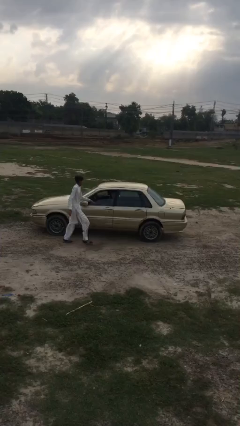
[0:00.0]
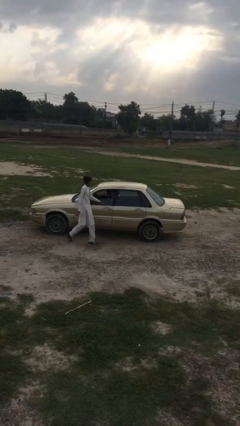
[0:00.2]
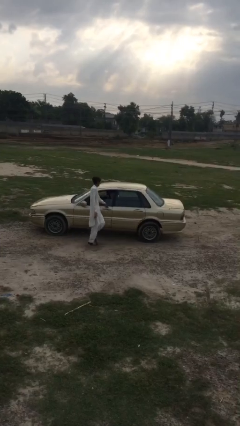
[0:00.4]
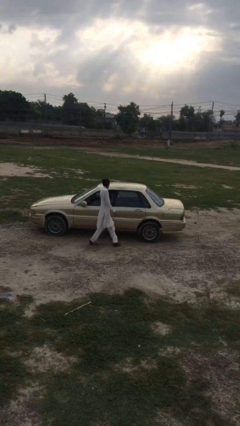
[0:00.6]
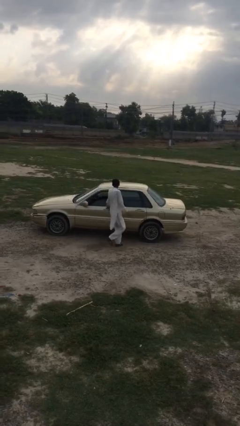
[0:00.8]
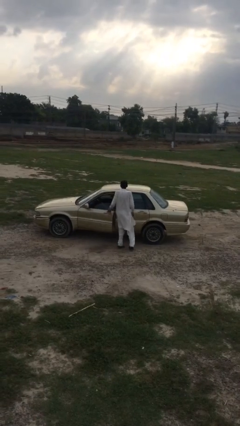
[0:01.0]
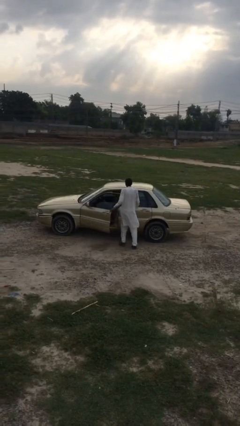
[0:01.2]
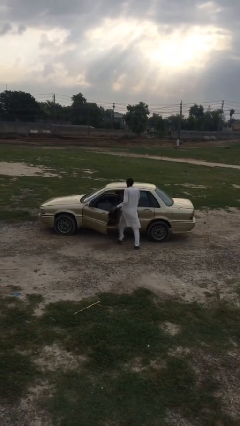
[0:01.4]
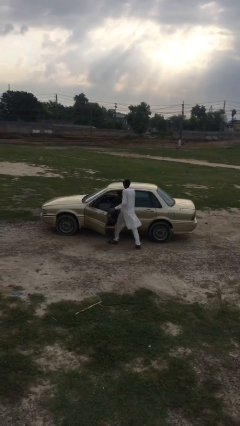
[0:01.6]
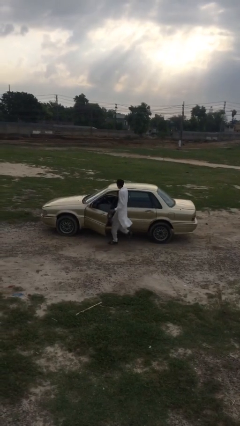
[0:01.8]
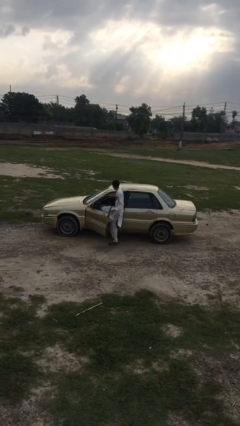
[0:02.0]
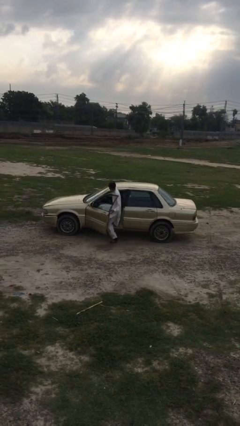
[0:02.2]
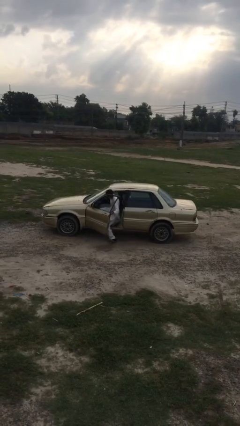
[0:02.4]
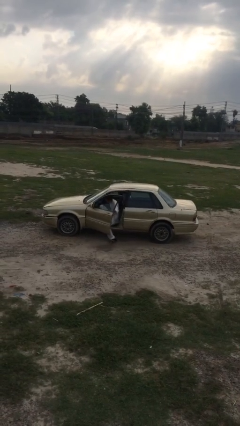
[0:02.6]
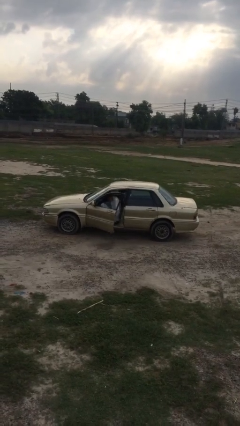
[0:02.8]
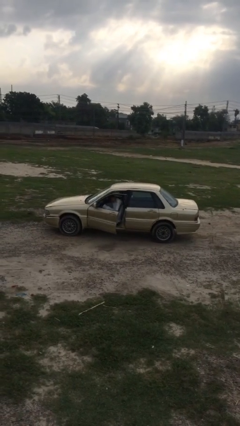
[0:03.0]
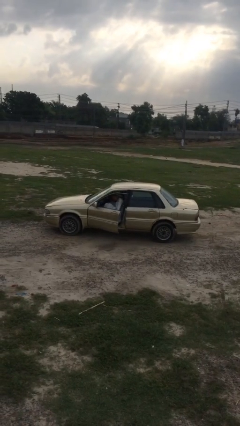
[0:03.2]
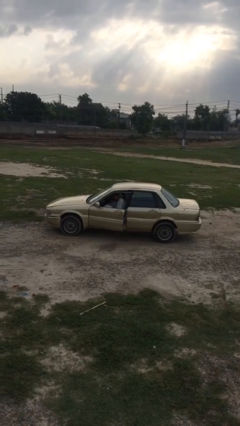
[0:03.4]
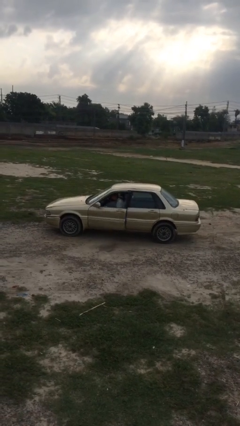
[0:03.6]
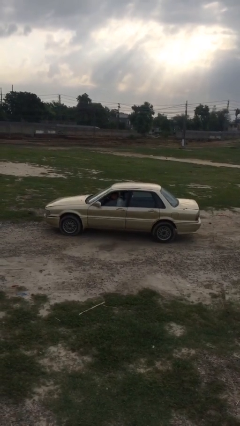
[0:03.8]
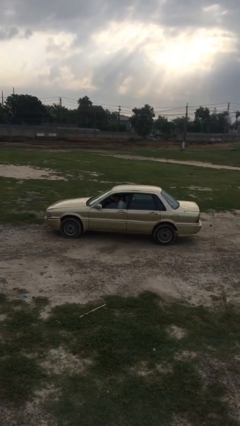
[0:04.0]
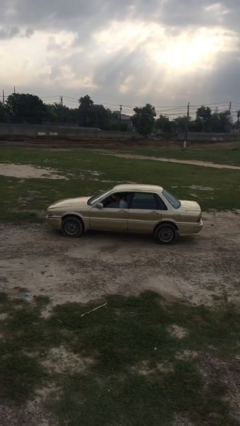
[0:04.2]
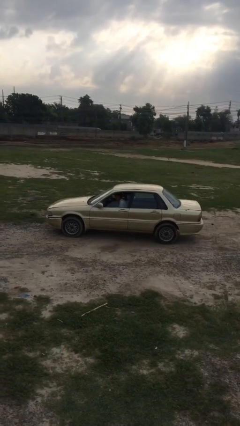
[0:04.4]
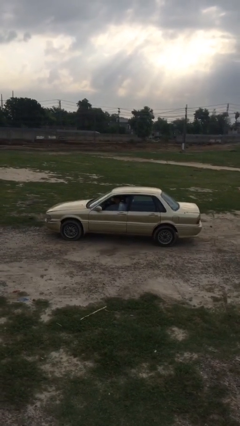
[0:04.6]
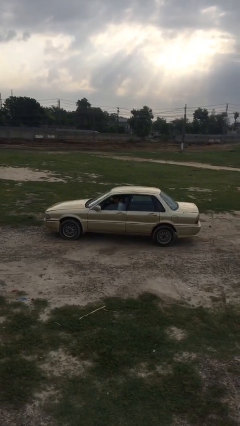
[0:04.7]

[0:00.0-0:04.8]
car picks up person

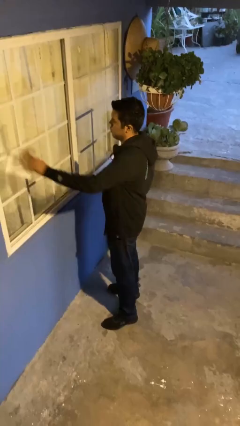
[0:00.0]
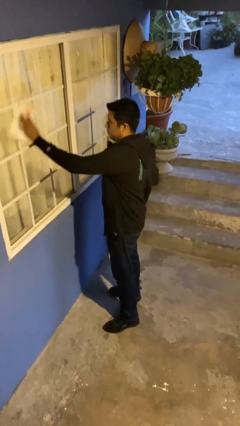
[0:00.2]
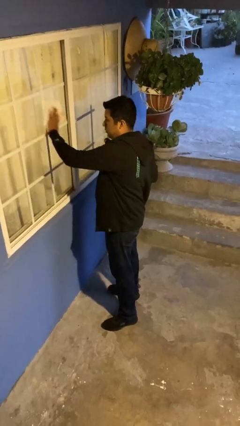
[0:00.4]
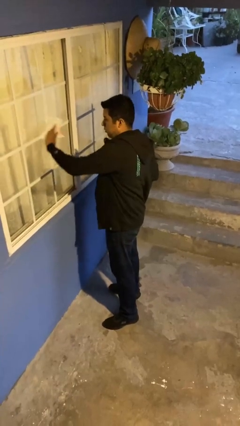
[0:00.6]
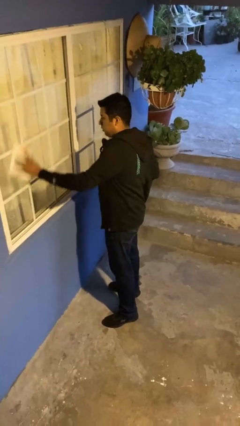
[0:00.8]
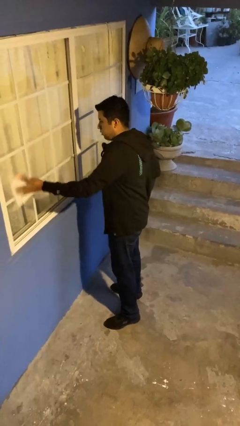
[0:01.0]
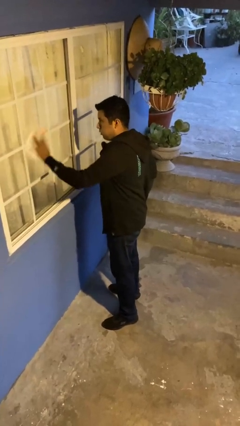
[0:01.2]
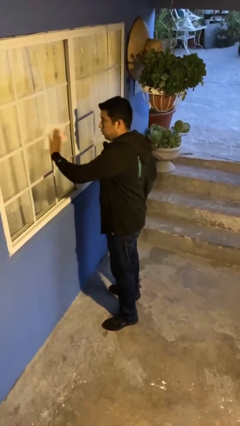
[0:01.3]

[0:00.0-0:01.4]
person washes window

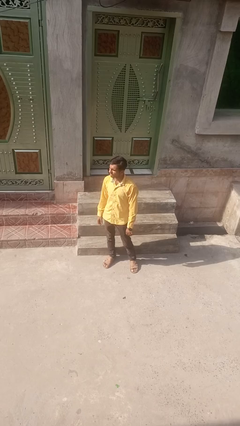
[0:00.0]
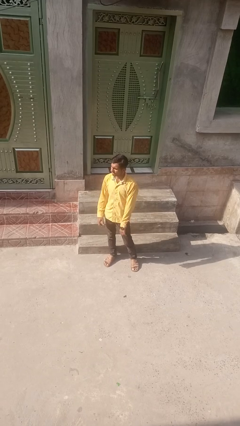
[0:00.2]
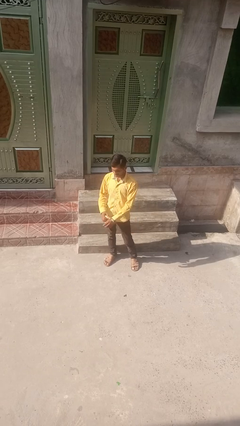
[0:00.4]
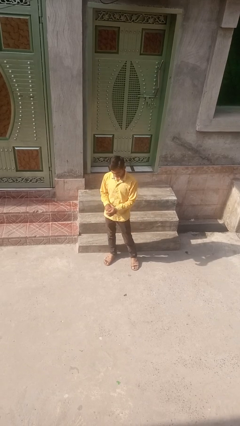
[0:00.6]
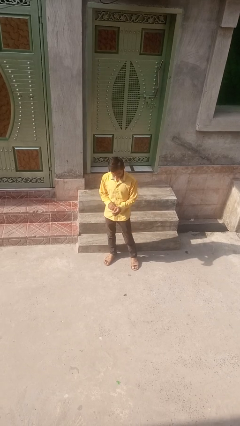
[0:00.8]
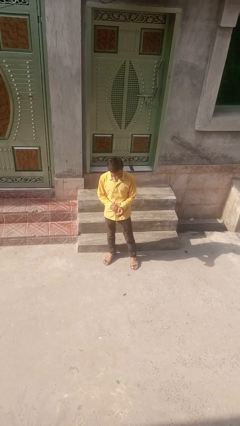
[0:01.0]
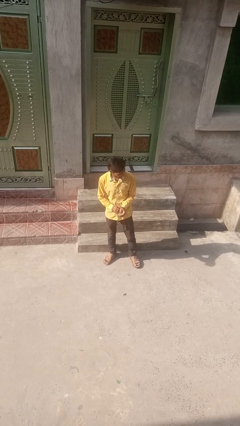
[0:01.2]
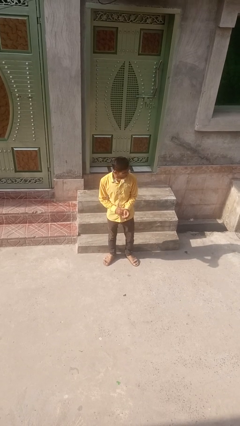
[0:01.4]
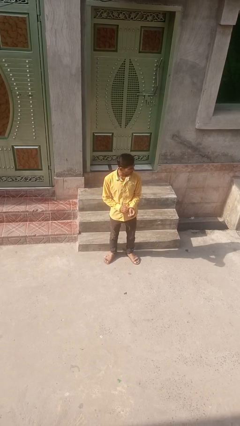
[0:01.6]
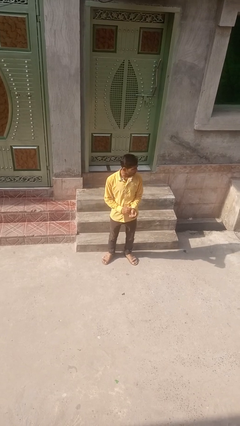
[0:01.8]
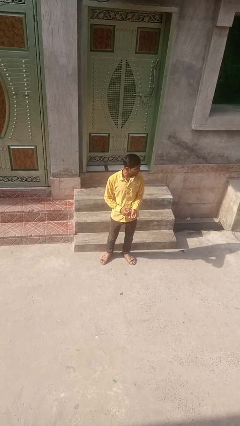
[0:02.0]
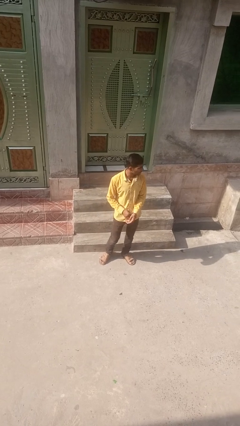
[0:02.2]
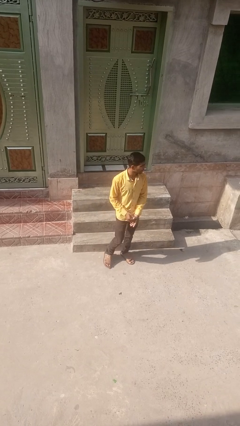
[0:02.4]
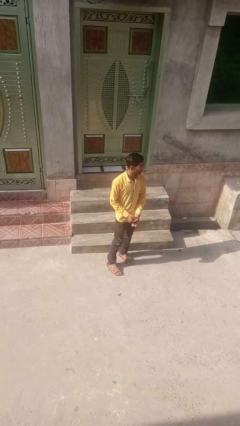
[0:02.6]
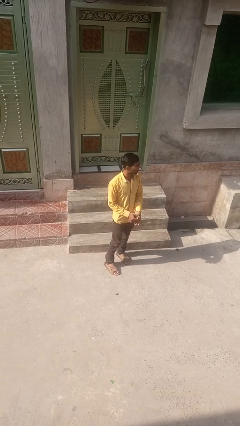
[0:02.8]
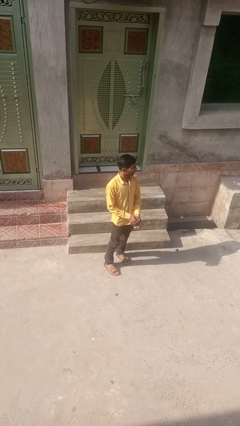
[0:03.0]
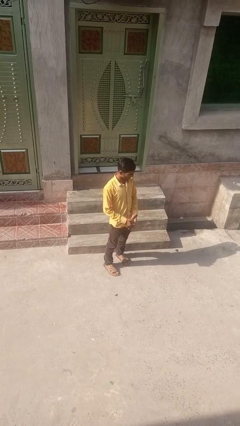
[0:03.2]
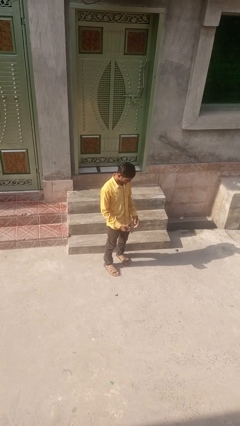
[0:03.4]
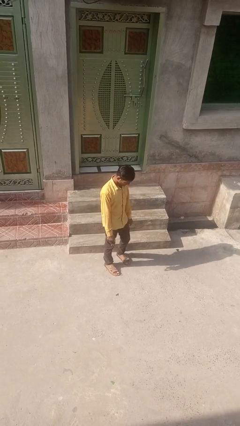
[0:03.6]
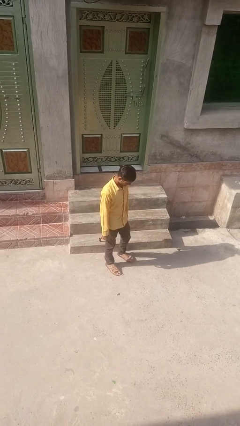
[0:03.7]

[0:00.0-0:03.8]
person takes off wristwatch

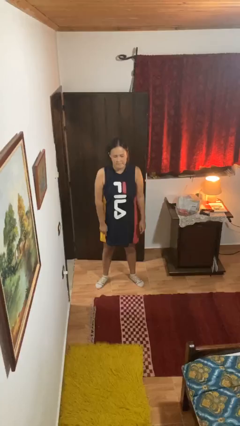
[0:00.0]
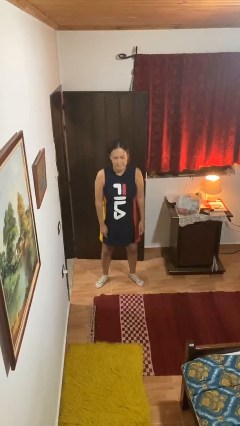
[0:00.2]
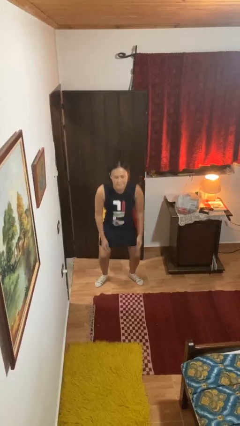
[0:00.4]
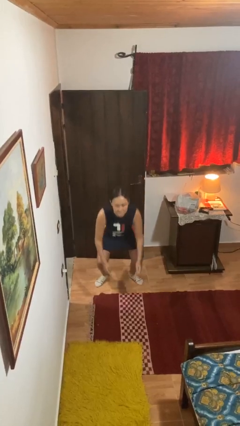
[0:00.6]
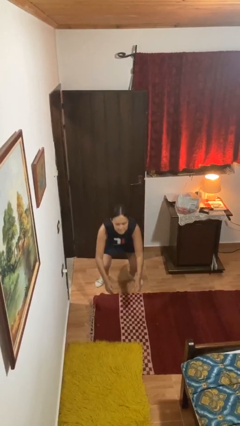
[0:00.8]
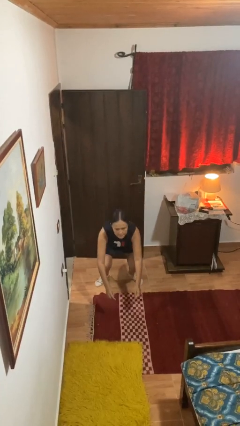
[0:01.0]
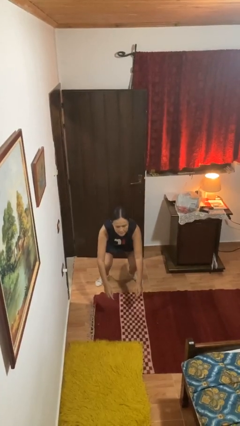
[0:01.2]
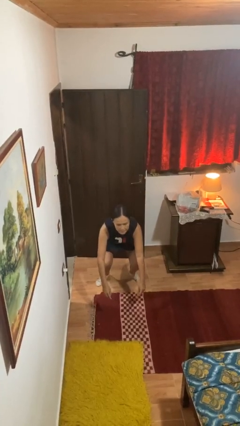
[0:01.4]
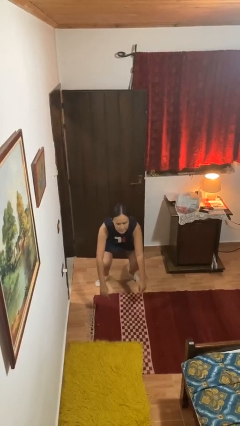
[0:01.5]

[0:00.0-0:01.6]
person squats

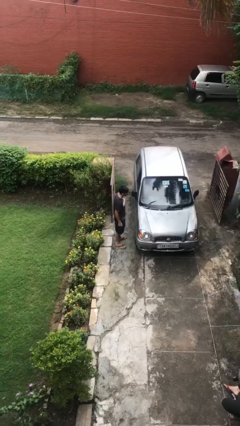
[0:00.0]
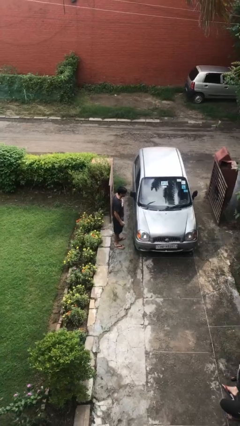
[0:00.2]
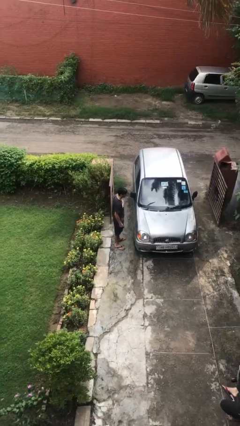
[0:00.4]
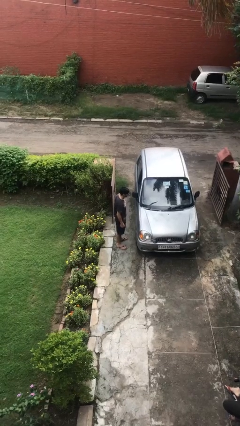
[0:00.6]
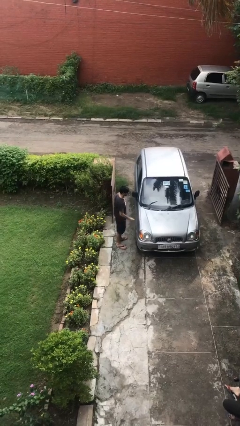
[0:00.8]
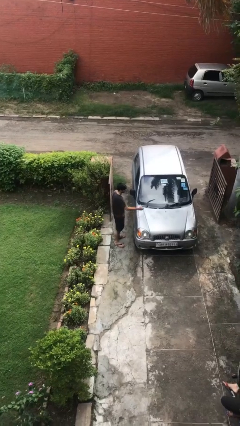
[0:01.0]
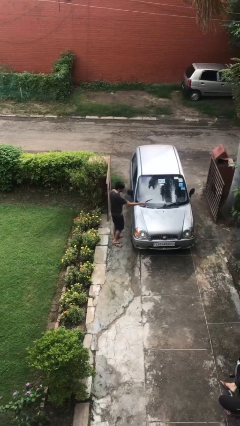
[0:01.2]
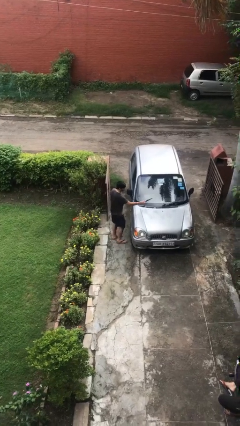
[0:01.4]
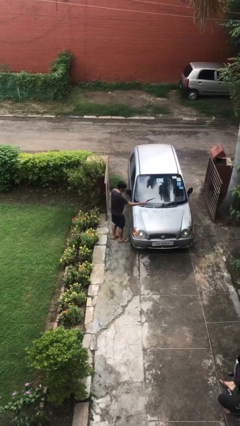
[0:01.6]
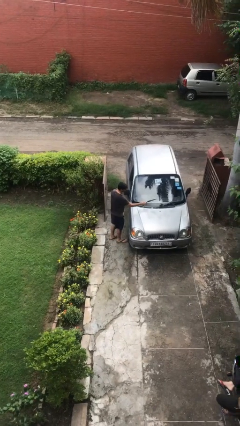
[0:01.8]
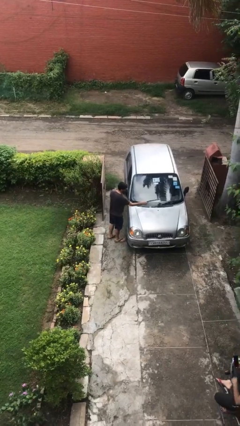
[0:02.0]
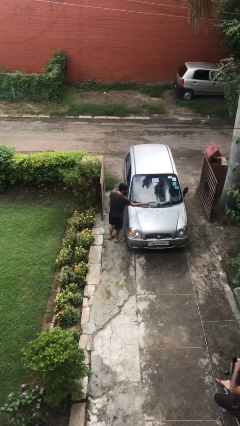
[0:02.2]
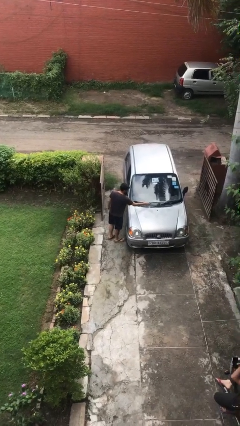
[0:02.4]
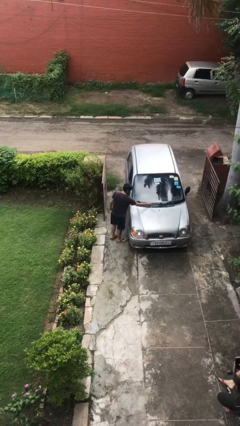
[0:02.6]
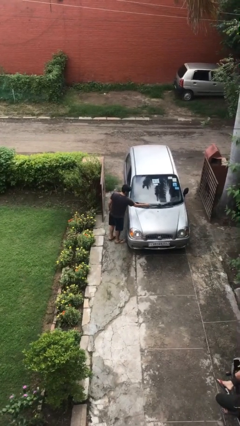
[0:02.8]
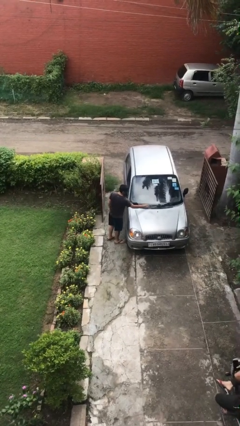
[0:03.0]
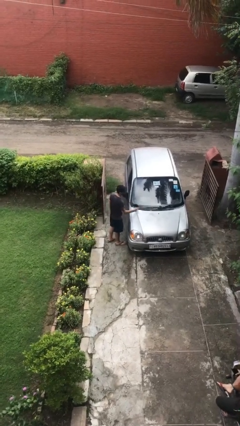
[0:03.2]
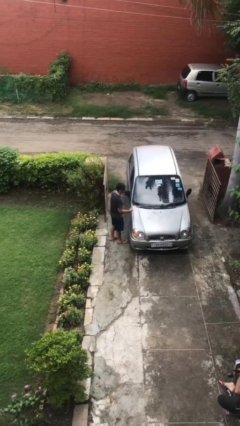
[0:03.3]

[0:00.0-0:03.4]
person flips down car wipers

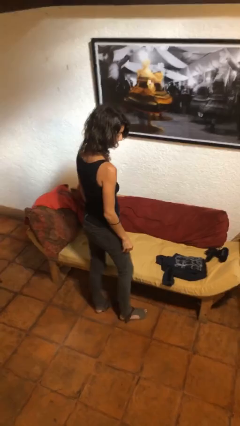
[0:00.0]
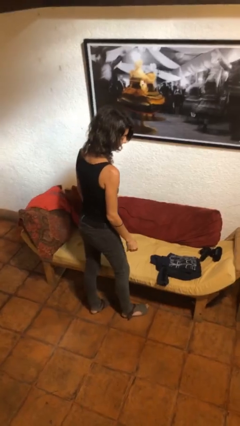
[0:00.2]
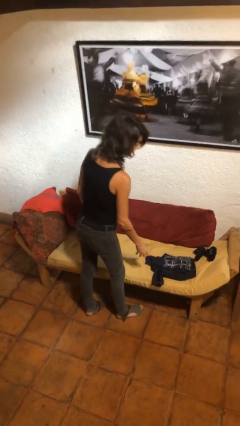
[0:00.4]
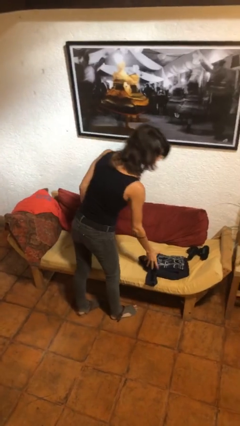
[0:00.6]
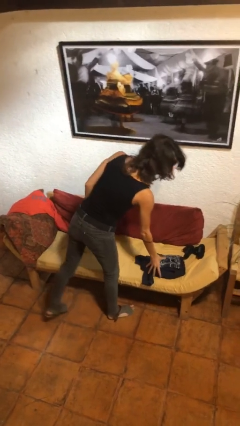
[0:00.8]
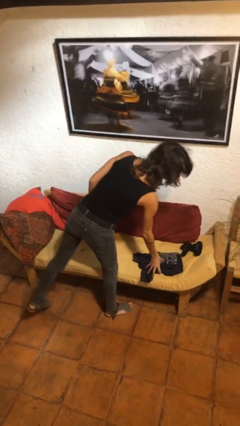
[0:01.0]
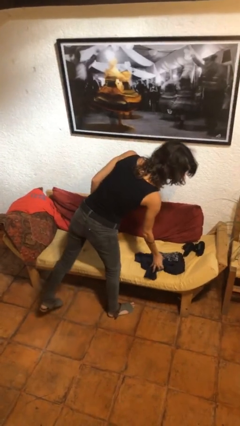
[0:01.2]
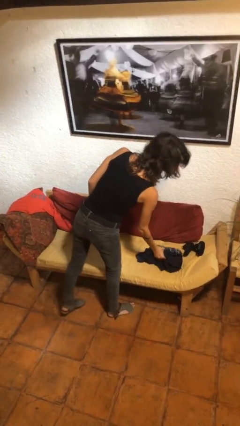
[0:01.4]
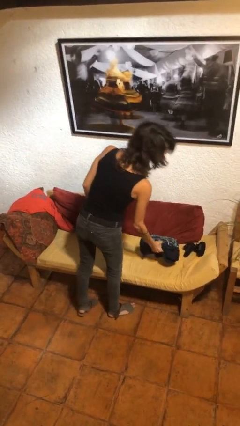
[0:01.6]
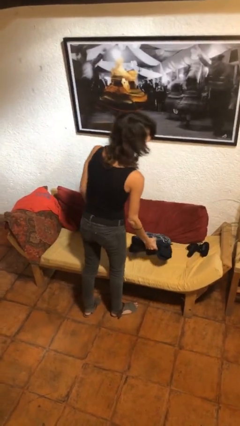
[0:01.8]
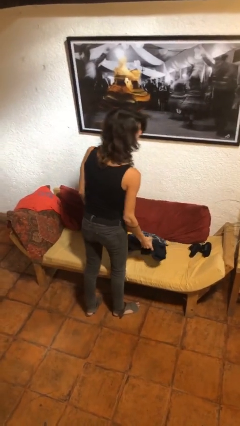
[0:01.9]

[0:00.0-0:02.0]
person picks up object from couch

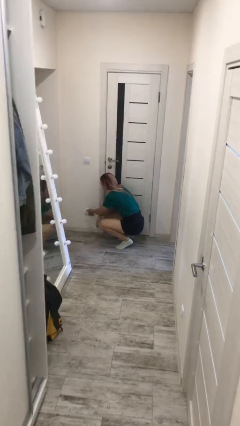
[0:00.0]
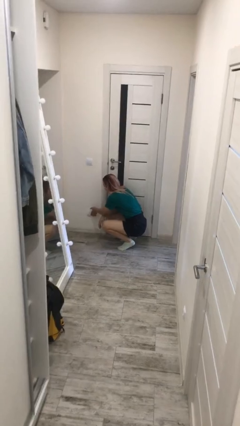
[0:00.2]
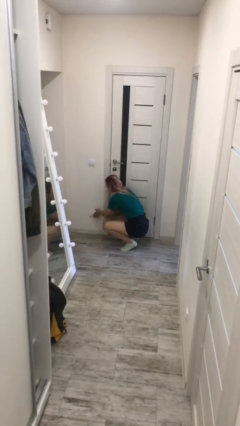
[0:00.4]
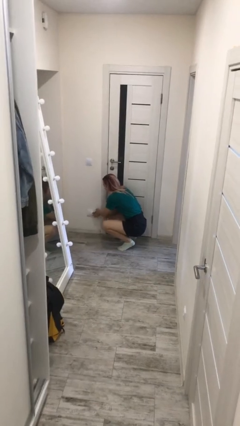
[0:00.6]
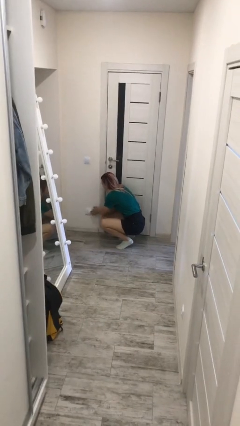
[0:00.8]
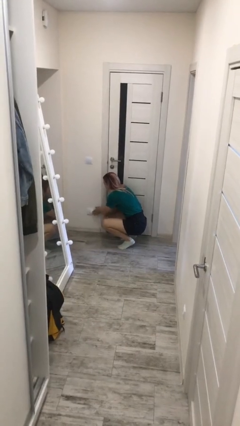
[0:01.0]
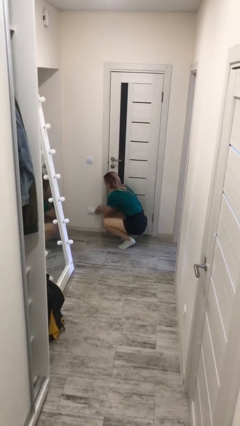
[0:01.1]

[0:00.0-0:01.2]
person adjusts thermostat
